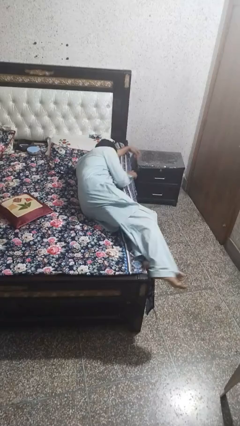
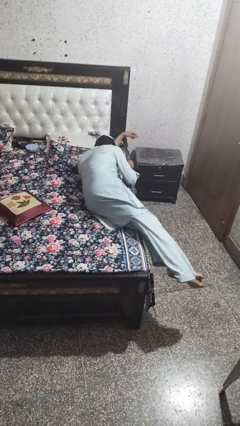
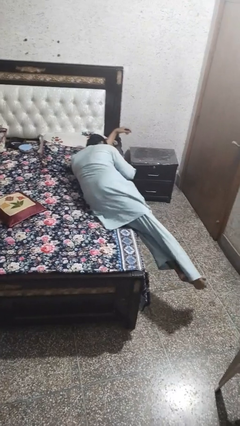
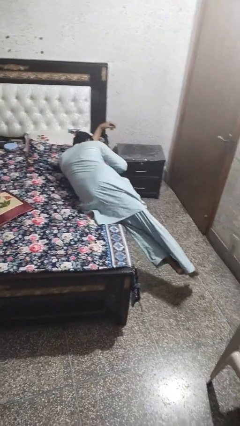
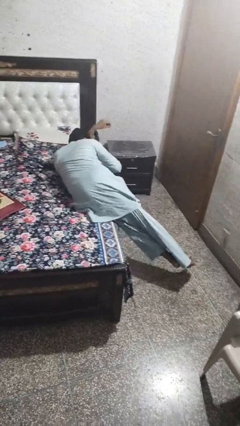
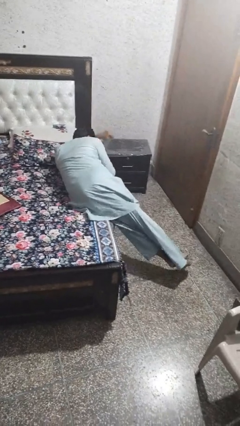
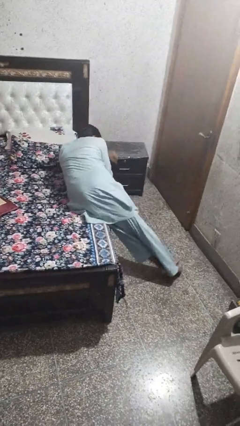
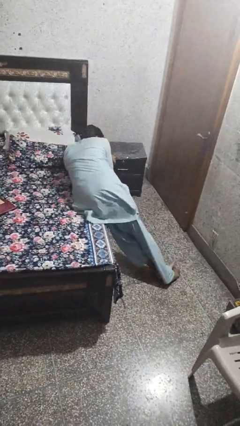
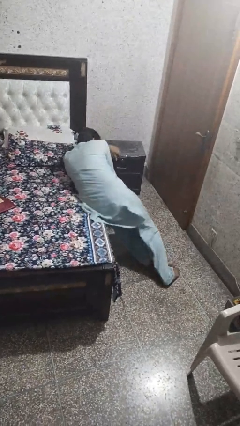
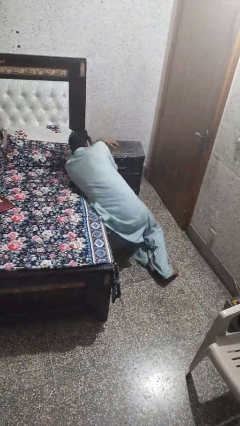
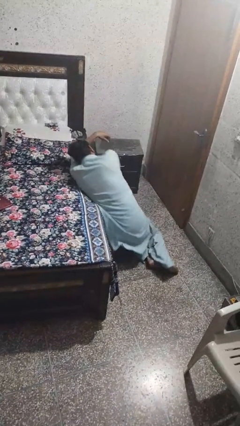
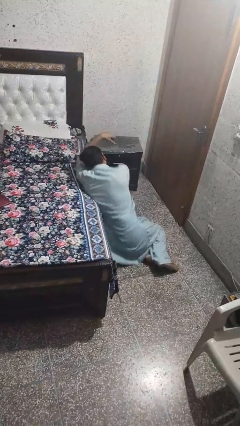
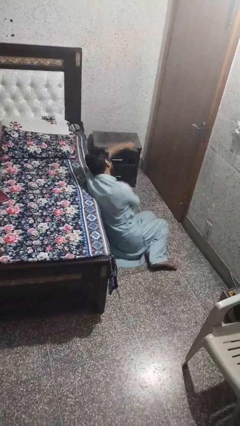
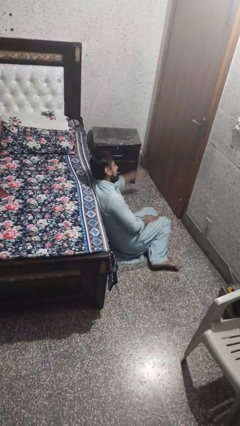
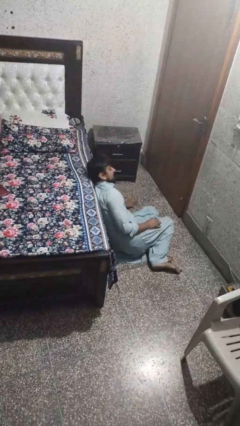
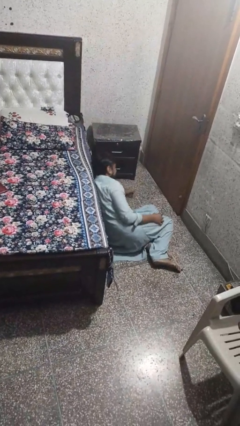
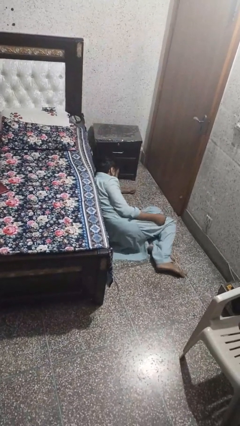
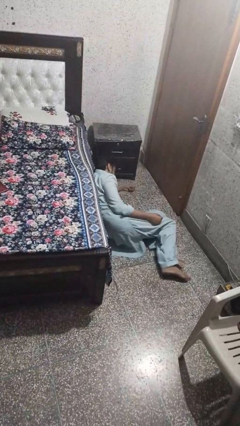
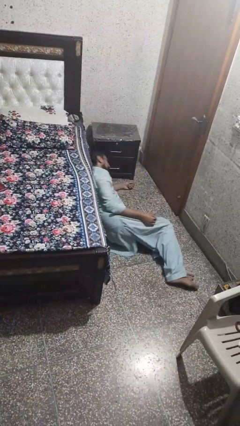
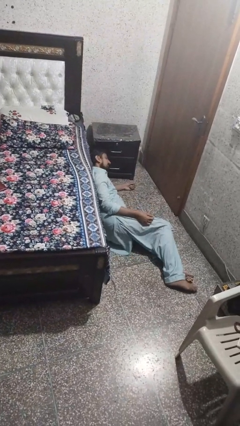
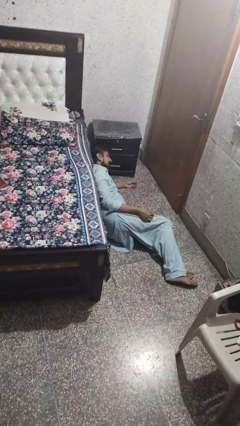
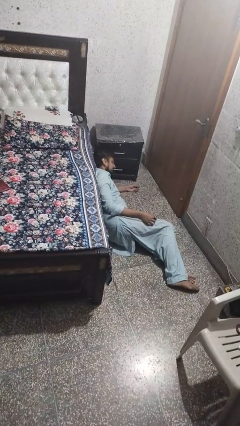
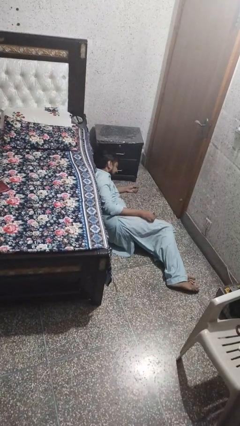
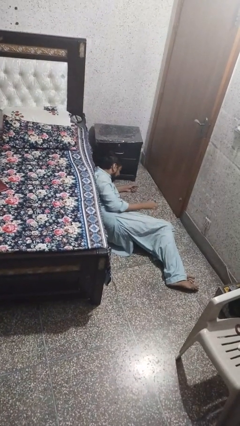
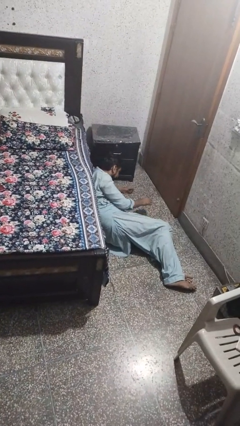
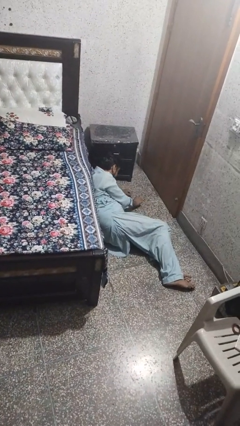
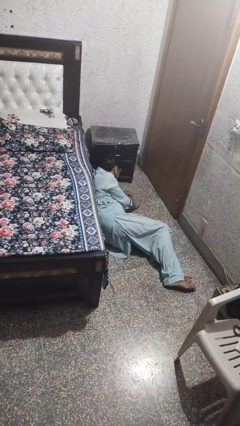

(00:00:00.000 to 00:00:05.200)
person falls from bed

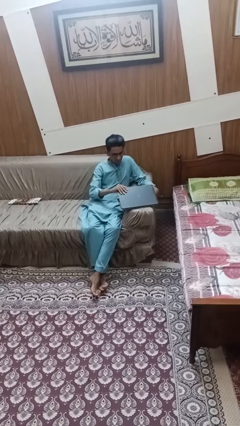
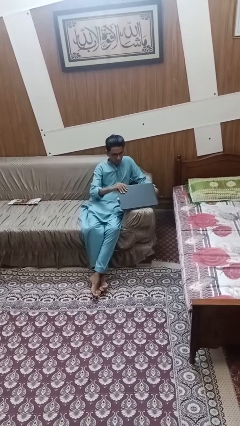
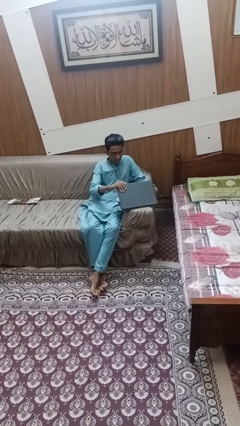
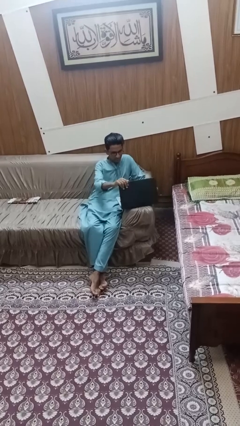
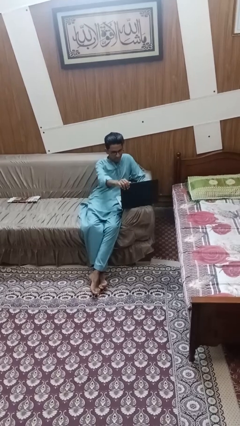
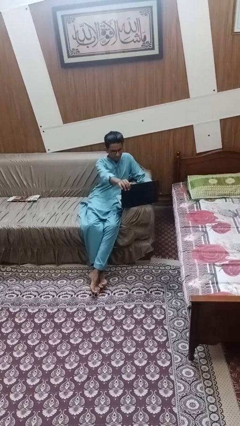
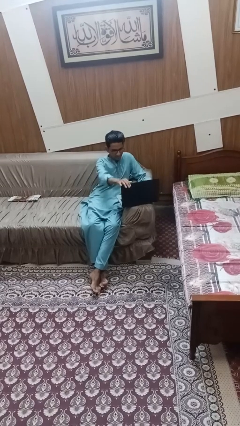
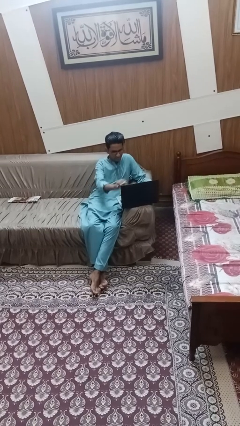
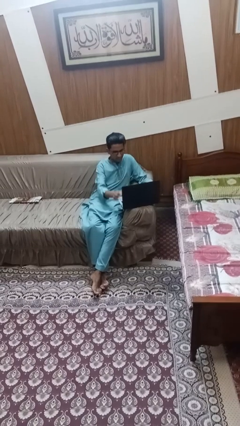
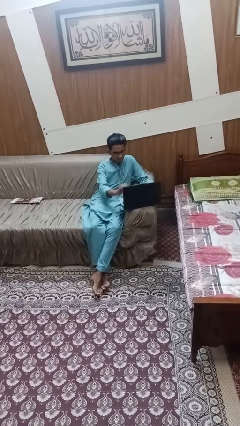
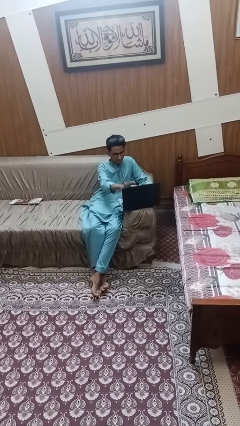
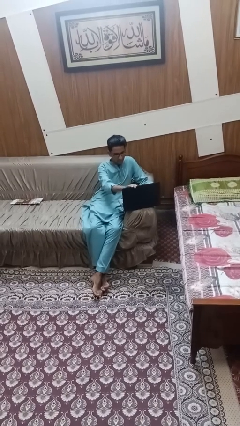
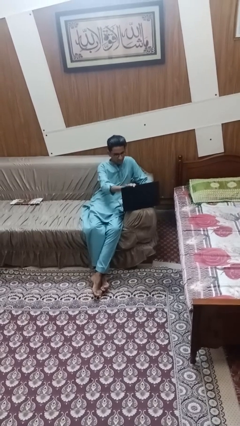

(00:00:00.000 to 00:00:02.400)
person opens laptop

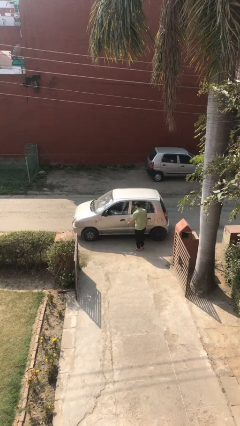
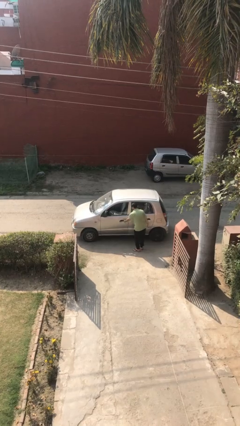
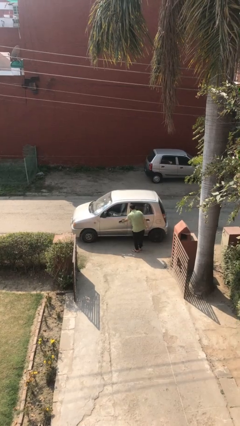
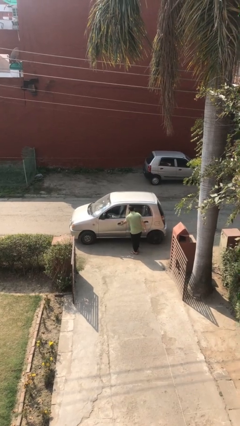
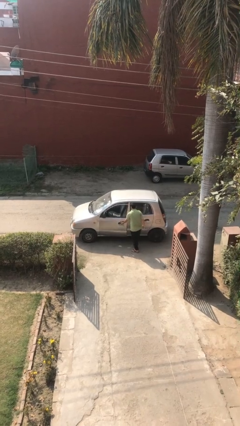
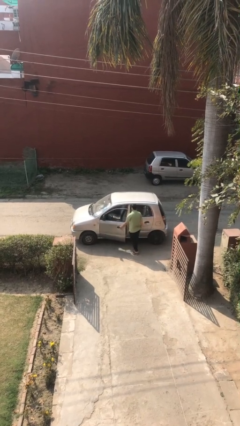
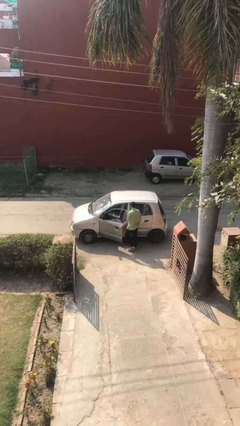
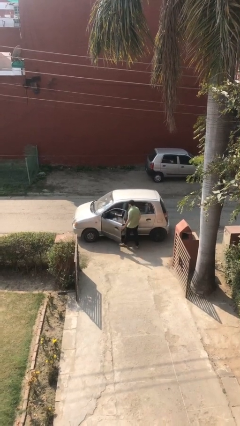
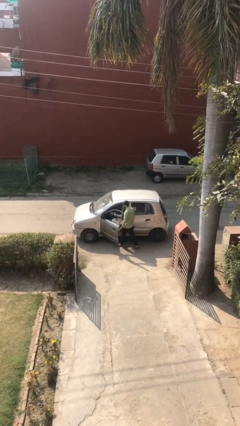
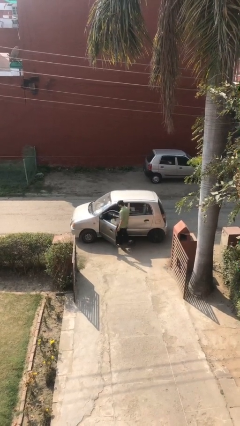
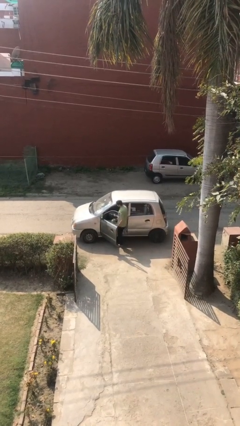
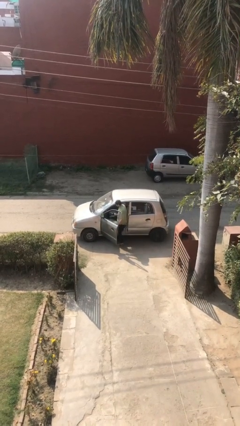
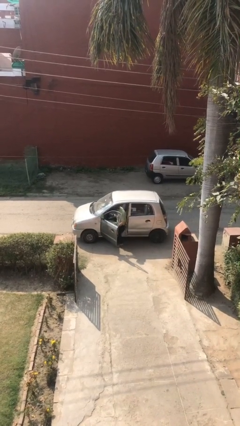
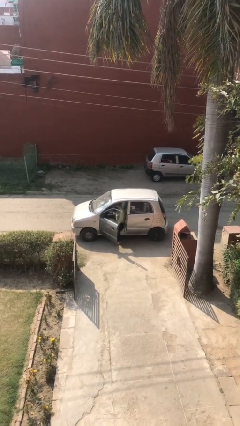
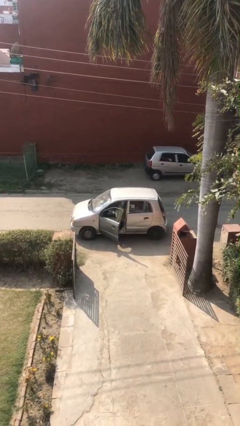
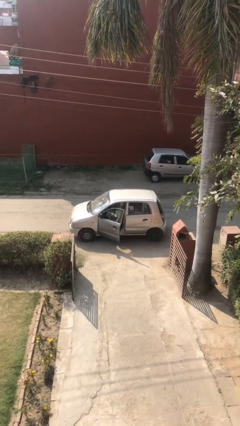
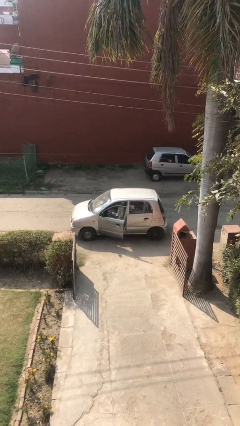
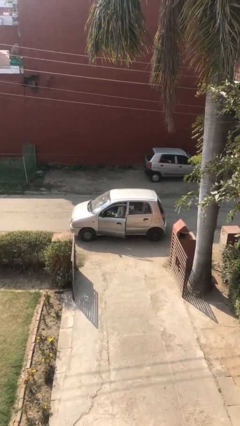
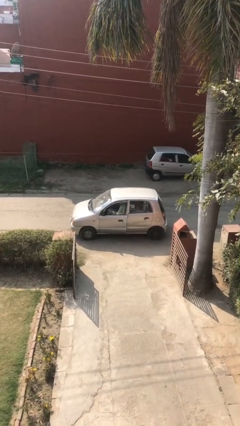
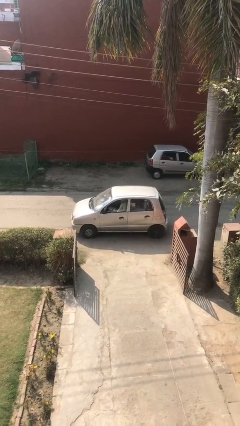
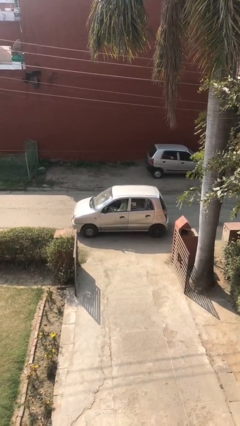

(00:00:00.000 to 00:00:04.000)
car picks up person

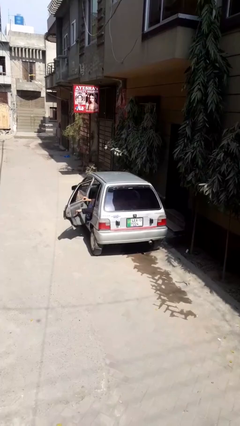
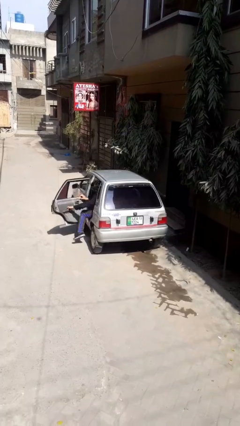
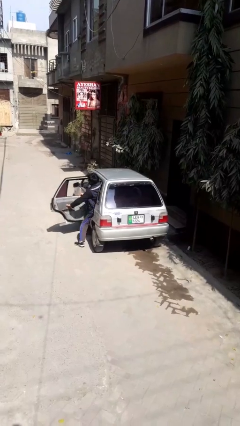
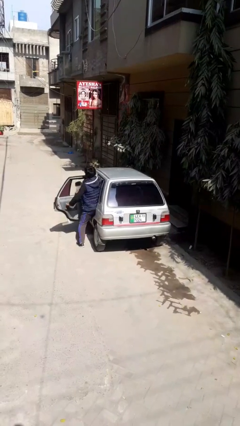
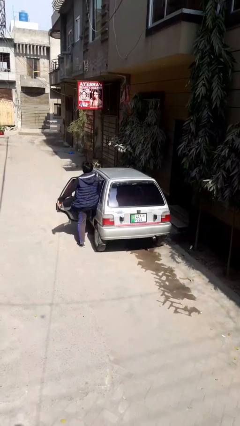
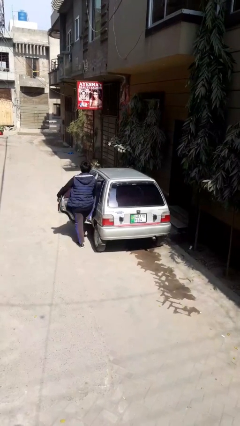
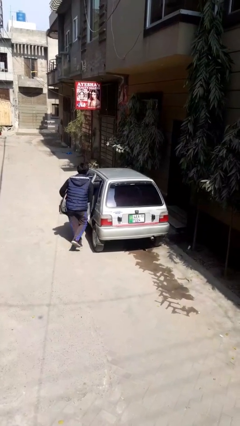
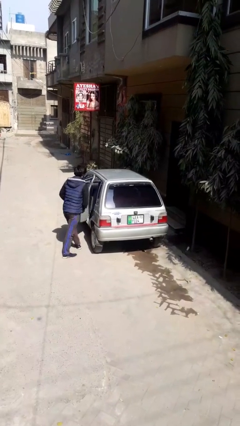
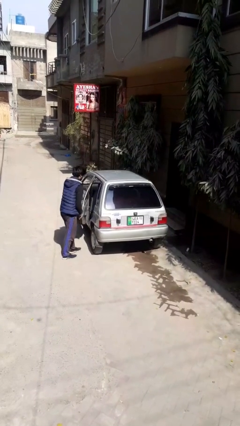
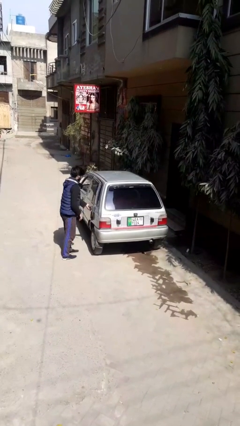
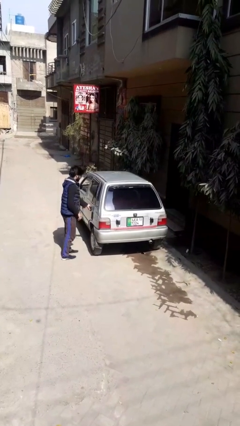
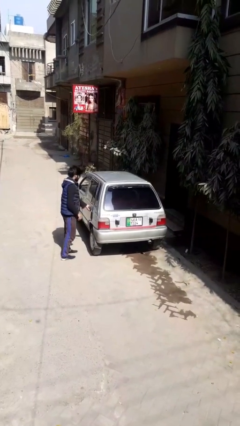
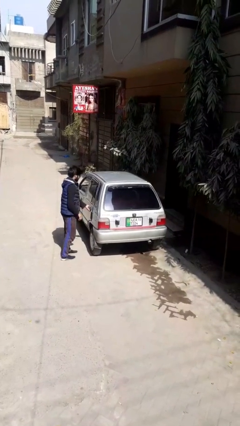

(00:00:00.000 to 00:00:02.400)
car drops off person

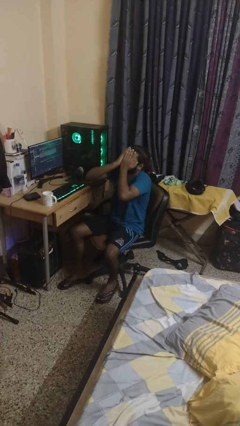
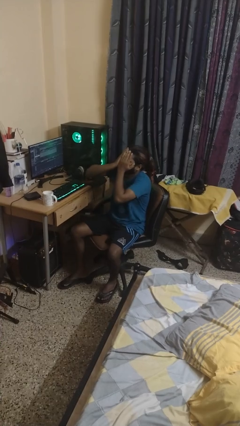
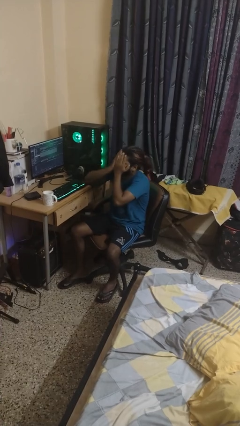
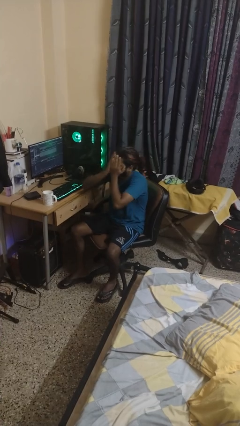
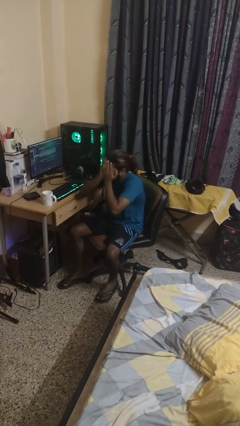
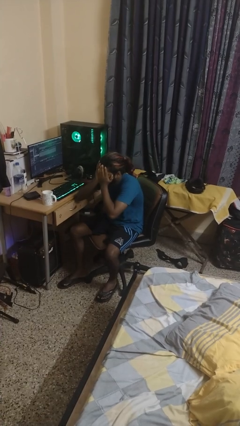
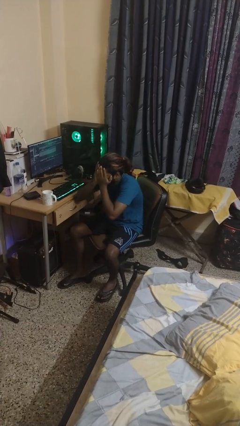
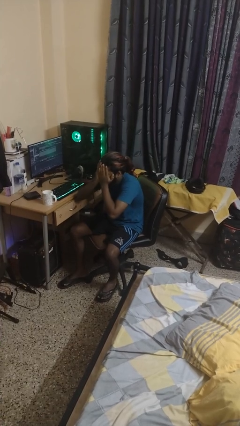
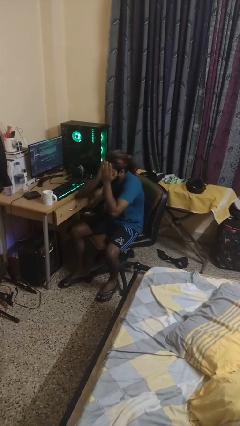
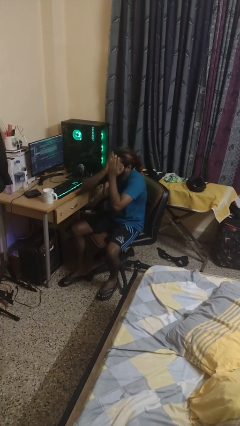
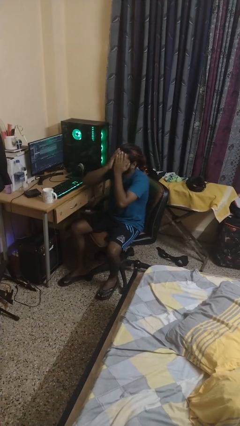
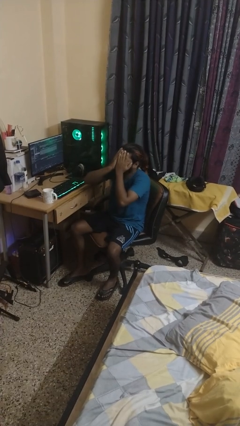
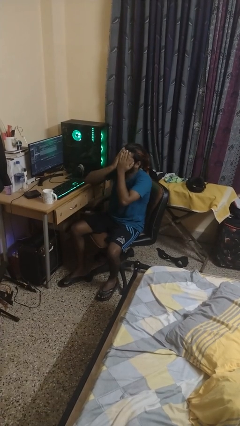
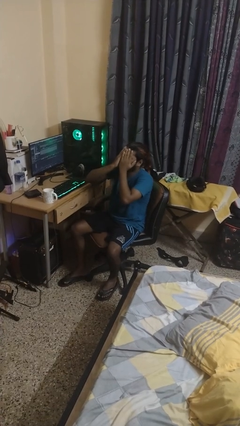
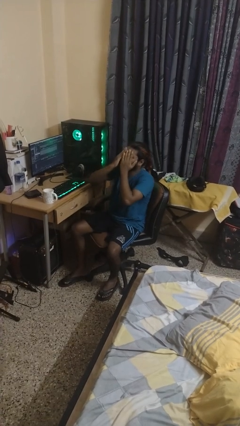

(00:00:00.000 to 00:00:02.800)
person covers face with hands

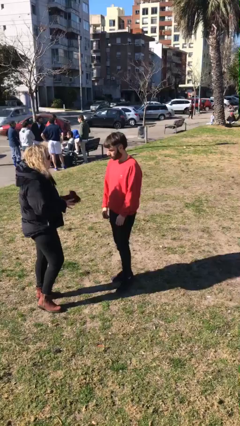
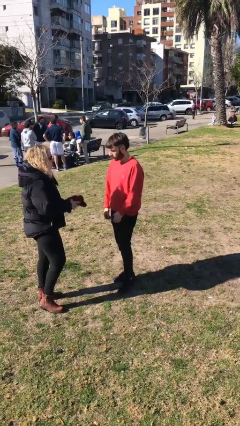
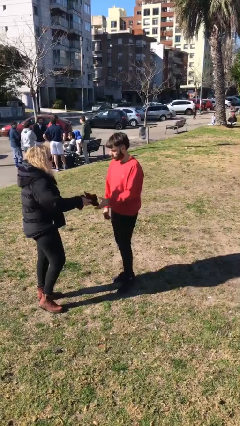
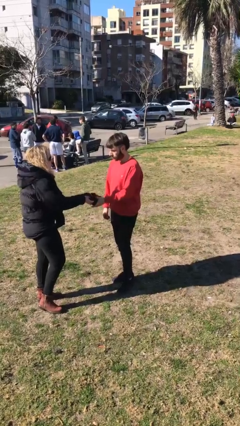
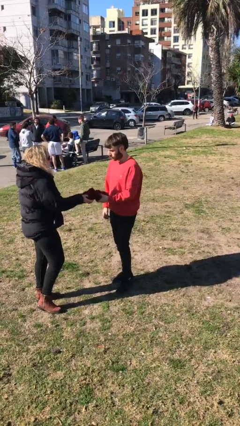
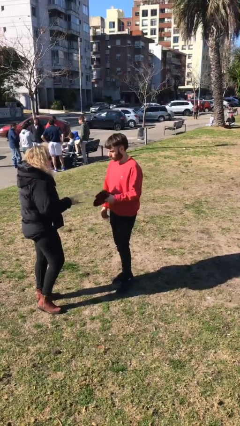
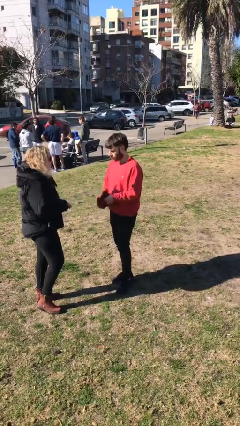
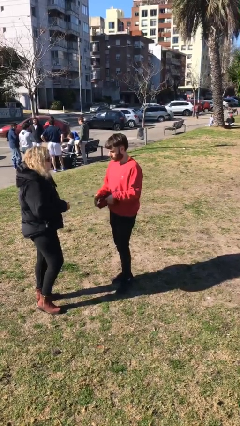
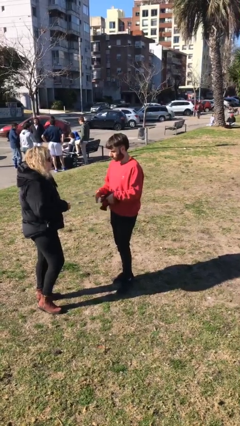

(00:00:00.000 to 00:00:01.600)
person transfers object to person
